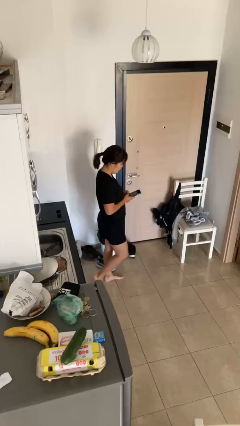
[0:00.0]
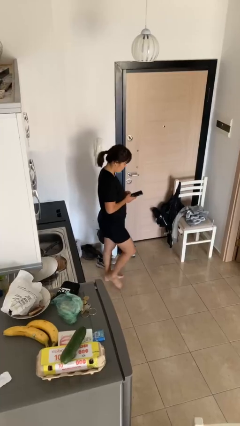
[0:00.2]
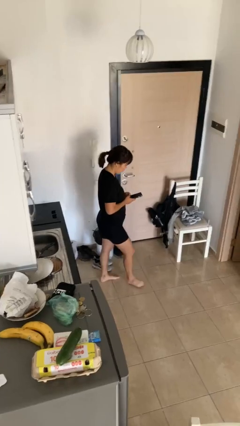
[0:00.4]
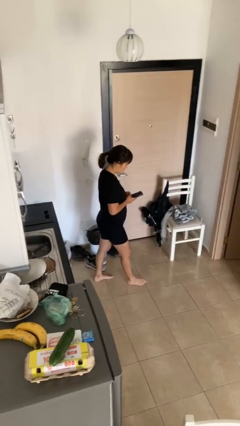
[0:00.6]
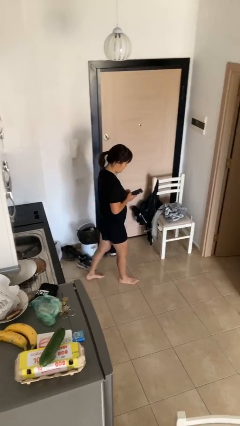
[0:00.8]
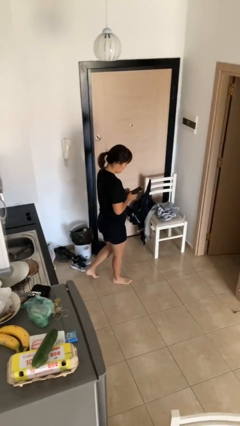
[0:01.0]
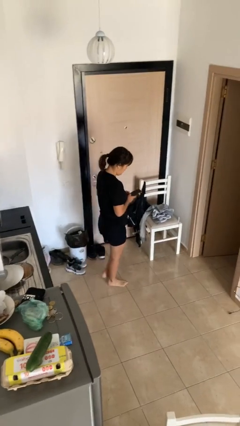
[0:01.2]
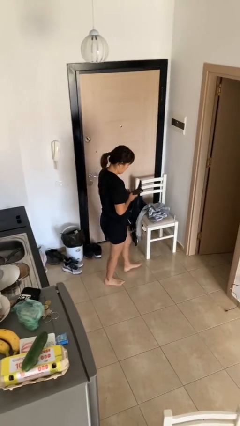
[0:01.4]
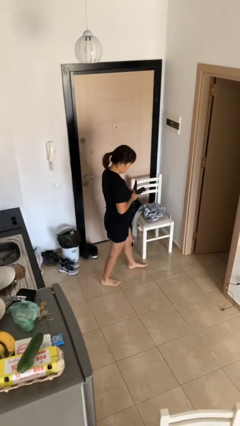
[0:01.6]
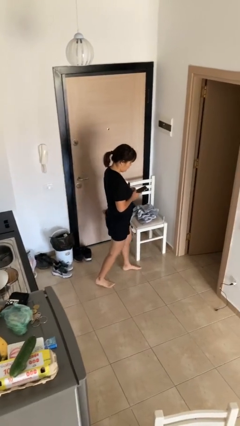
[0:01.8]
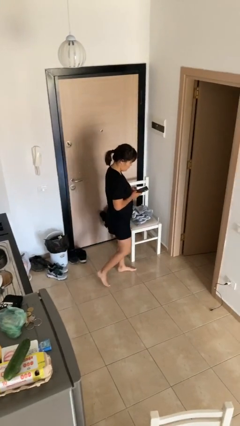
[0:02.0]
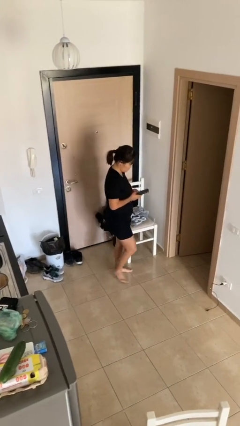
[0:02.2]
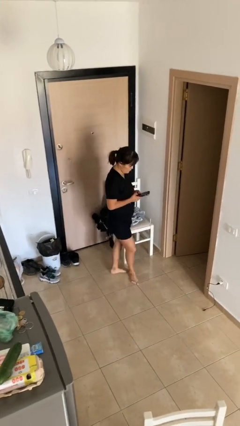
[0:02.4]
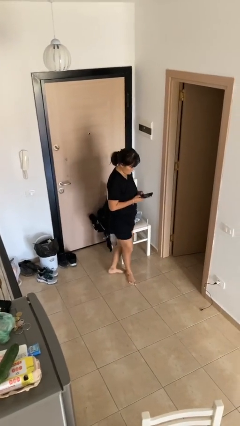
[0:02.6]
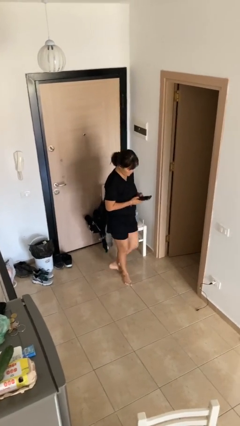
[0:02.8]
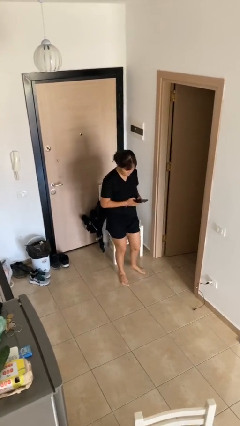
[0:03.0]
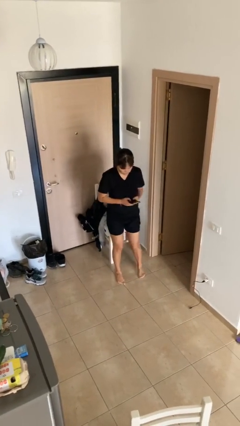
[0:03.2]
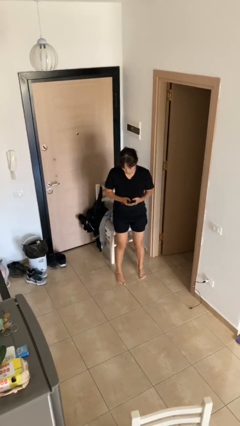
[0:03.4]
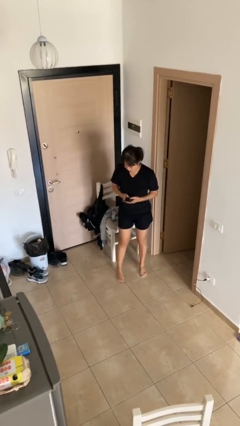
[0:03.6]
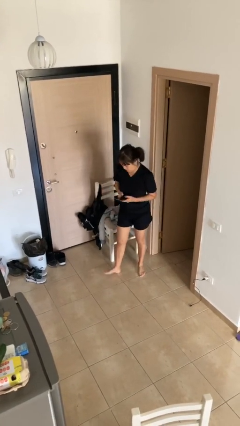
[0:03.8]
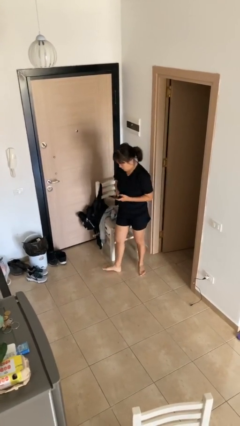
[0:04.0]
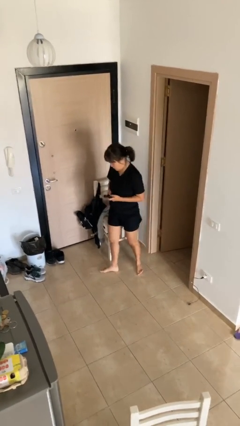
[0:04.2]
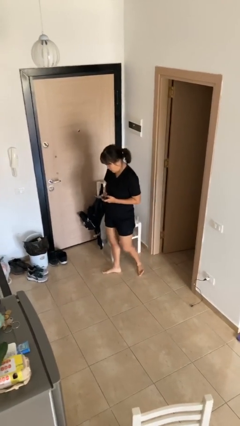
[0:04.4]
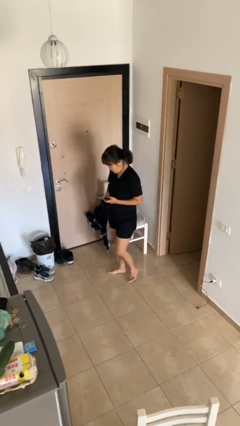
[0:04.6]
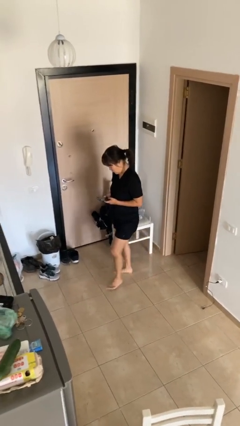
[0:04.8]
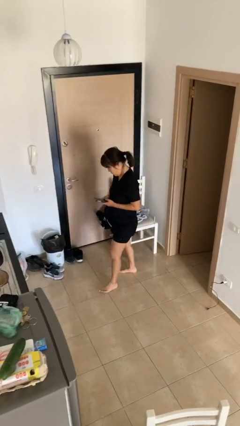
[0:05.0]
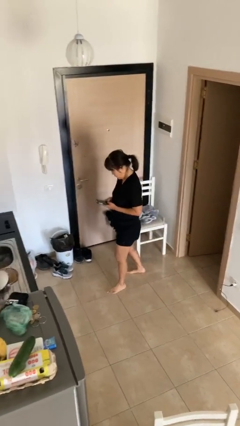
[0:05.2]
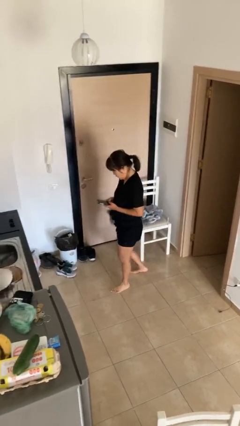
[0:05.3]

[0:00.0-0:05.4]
person texts on phone

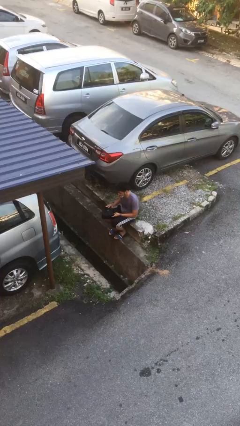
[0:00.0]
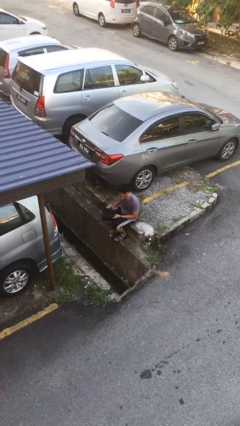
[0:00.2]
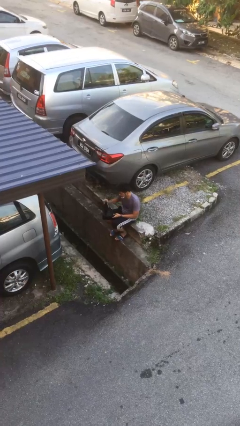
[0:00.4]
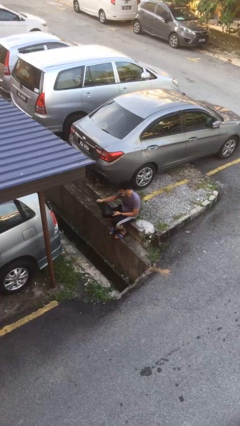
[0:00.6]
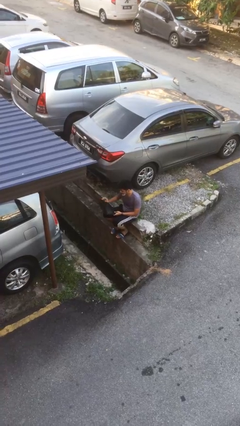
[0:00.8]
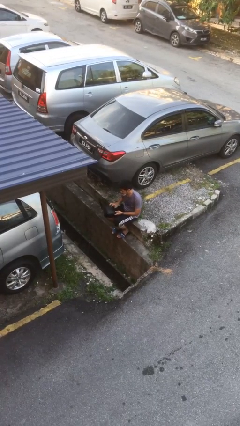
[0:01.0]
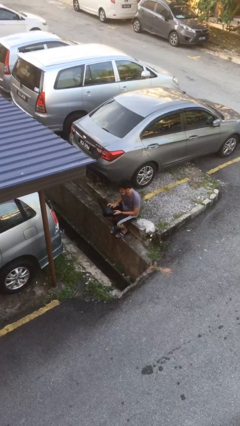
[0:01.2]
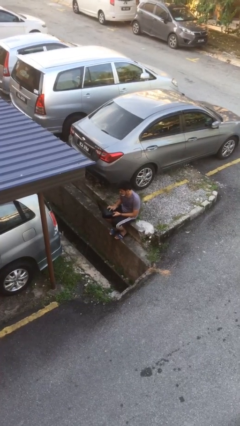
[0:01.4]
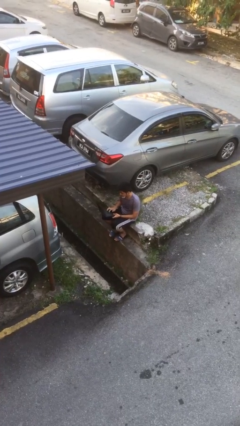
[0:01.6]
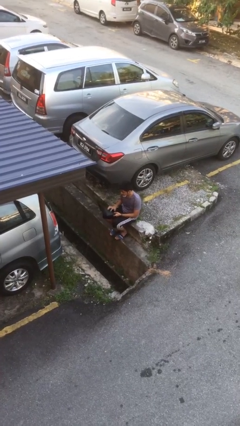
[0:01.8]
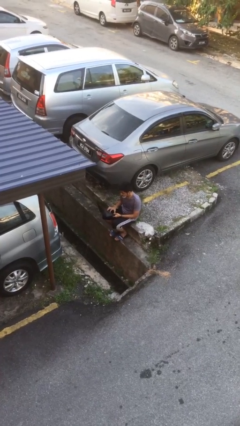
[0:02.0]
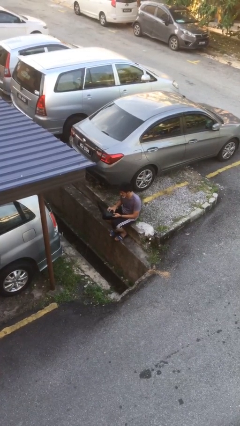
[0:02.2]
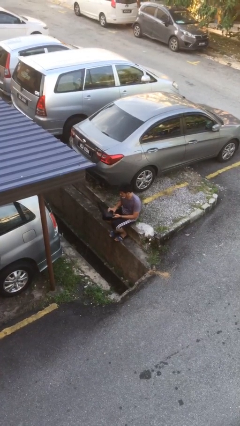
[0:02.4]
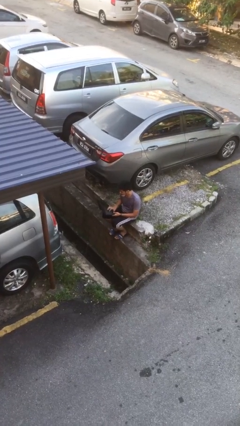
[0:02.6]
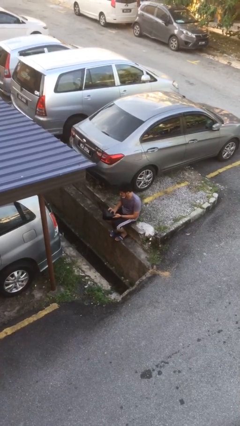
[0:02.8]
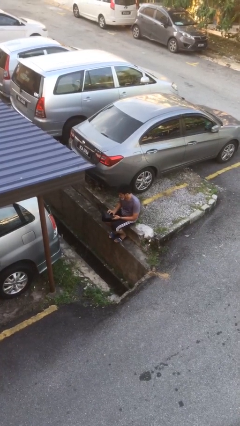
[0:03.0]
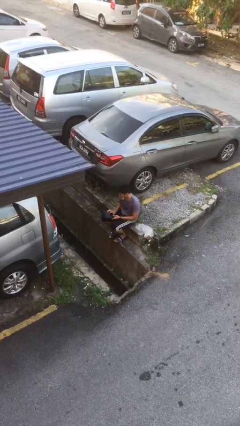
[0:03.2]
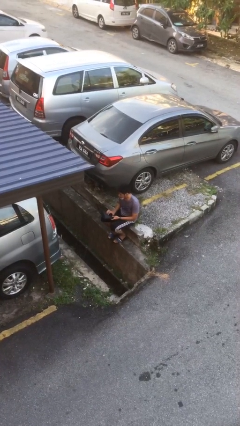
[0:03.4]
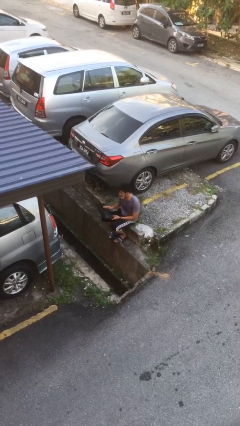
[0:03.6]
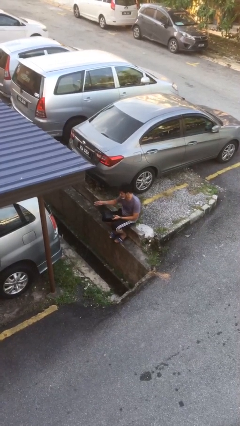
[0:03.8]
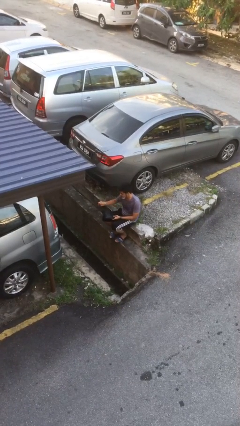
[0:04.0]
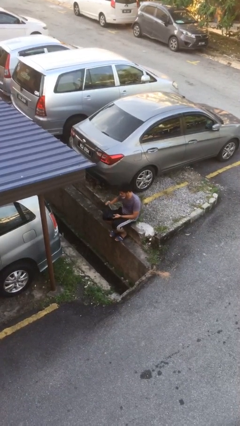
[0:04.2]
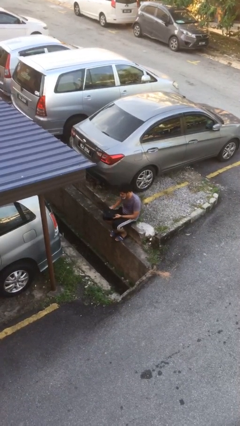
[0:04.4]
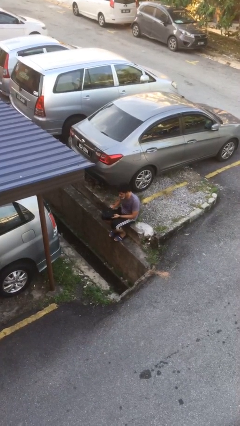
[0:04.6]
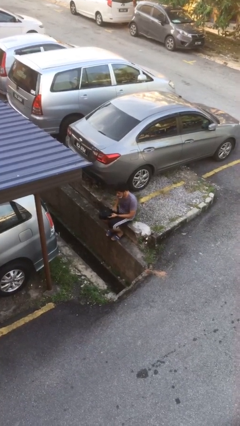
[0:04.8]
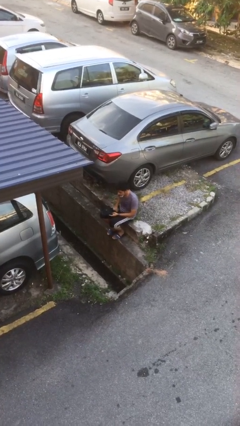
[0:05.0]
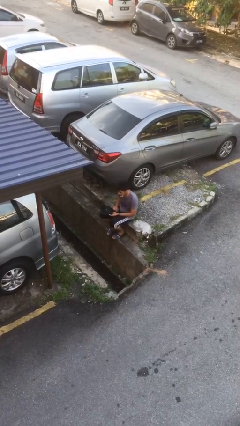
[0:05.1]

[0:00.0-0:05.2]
person interacts with laptop

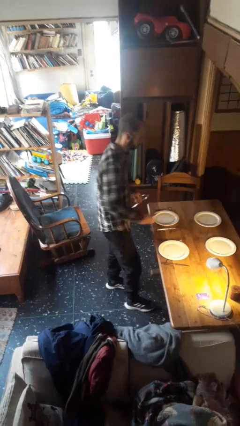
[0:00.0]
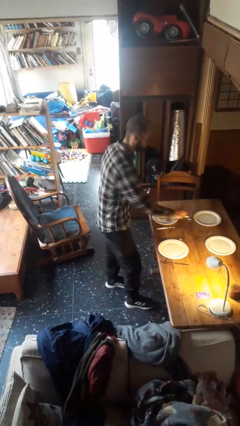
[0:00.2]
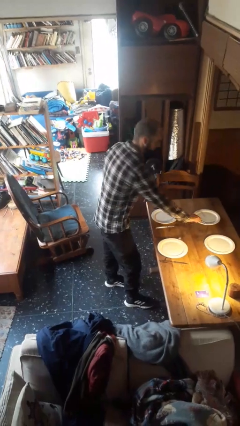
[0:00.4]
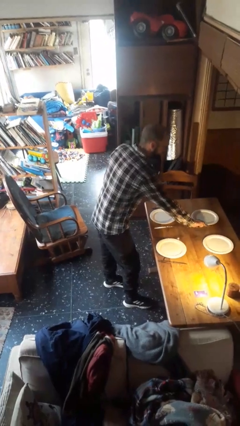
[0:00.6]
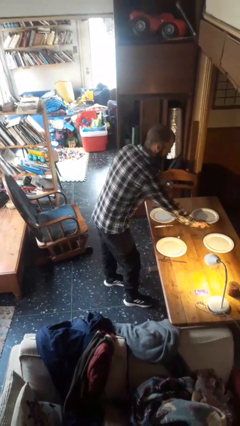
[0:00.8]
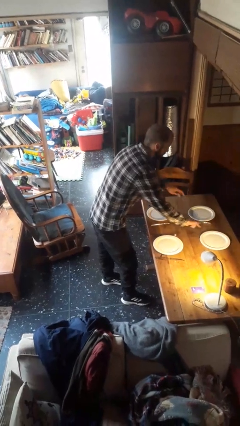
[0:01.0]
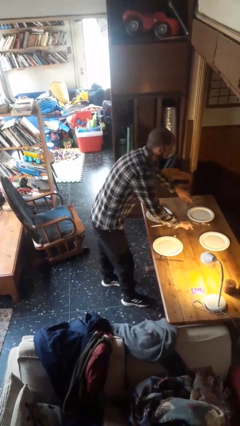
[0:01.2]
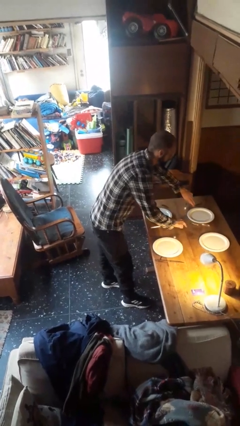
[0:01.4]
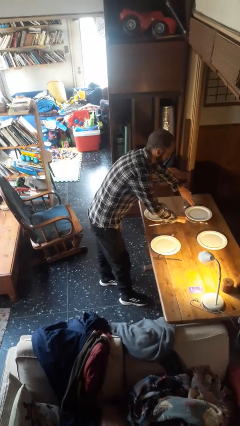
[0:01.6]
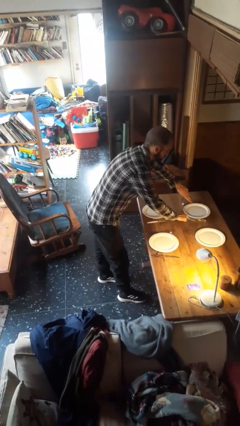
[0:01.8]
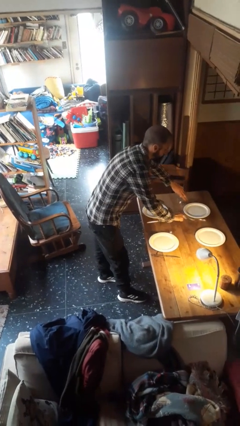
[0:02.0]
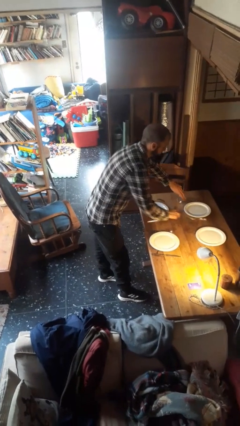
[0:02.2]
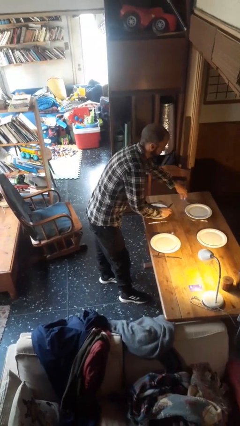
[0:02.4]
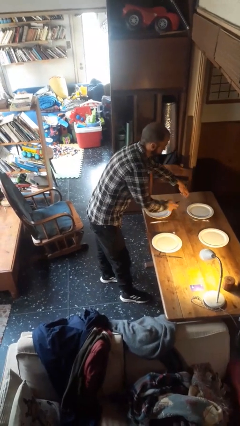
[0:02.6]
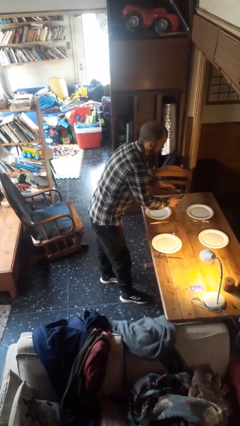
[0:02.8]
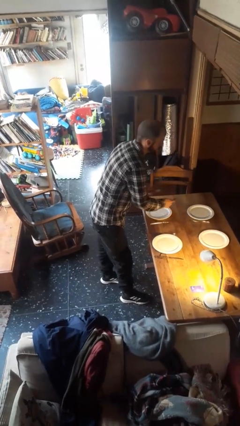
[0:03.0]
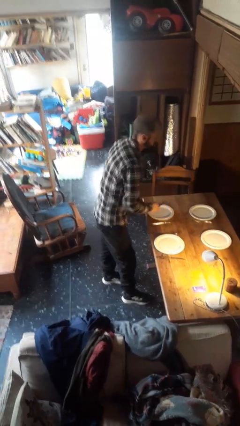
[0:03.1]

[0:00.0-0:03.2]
person sets table

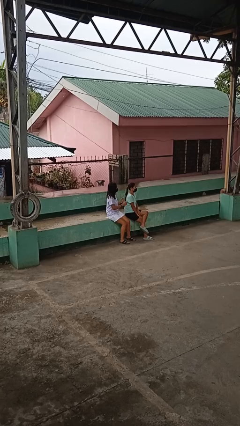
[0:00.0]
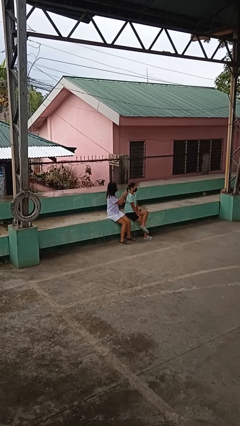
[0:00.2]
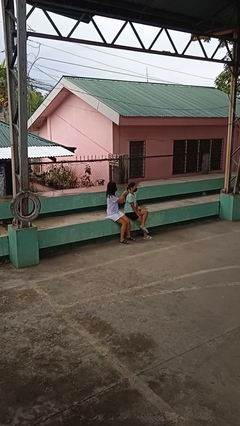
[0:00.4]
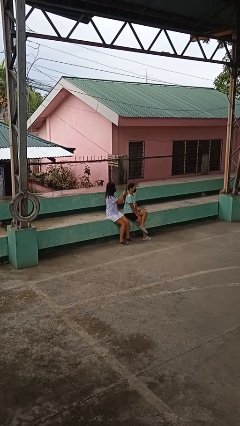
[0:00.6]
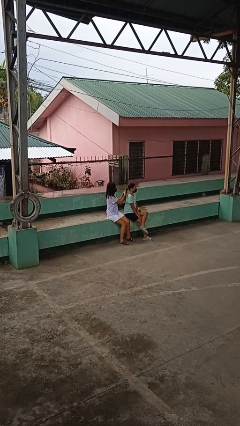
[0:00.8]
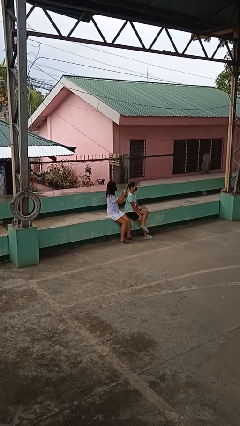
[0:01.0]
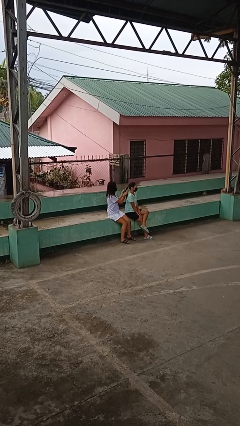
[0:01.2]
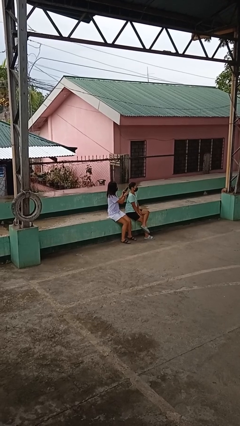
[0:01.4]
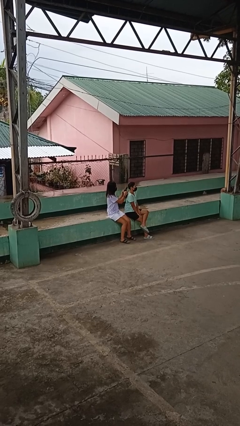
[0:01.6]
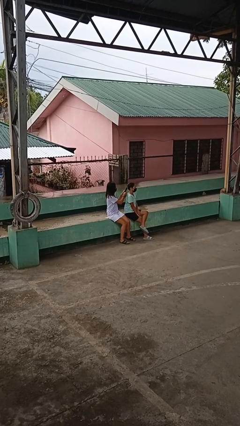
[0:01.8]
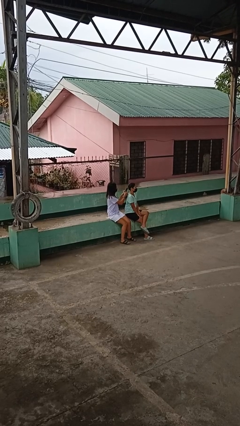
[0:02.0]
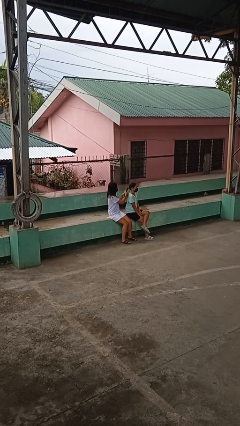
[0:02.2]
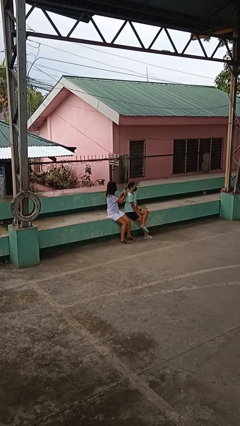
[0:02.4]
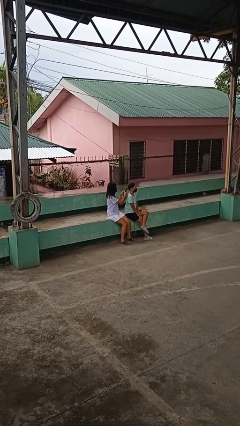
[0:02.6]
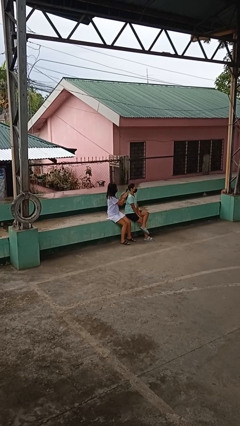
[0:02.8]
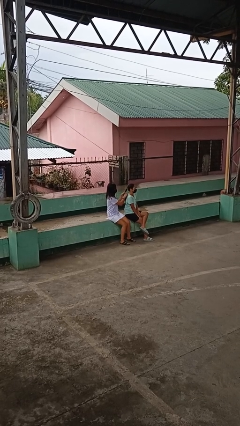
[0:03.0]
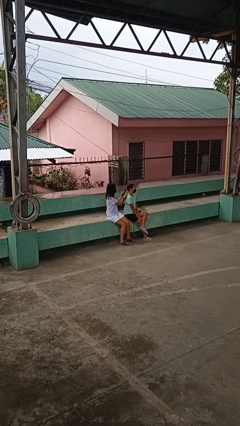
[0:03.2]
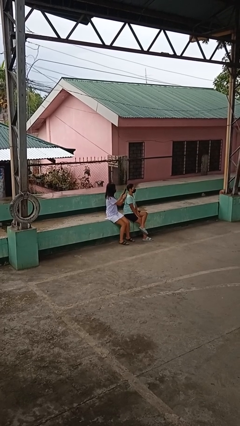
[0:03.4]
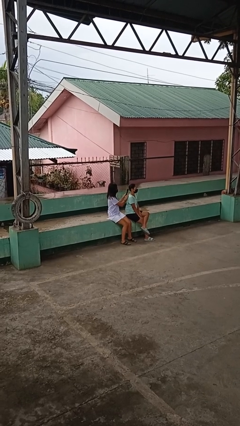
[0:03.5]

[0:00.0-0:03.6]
person braids hair of person

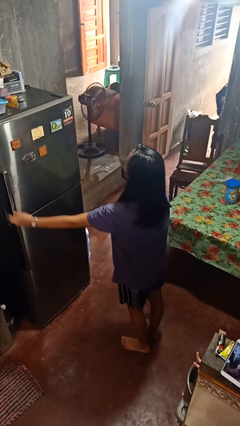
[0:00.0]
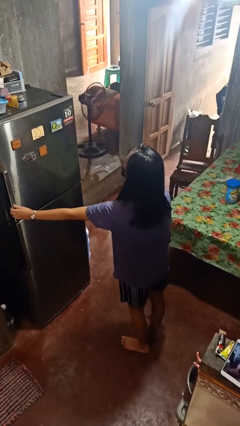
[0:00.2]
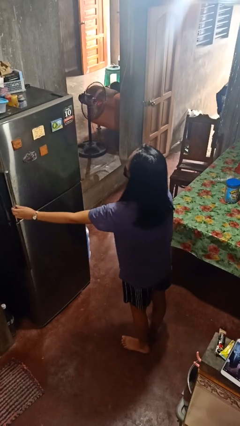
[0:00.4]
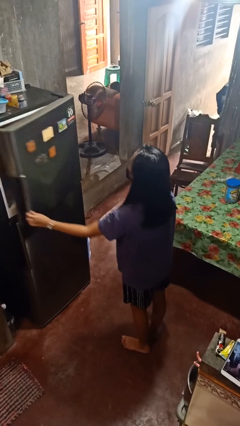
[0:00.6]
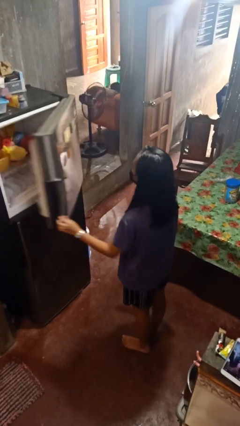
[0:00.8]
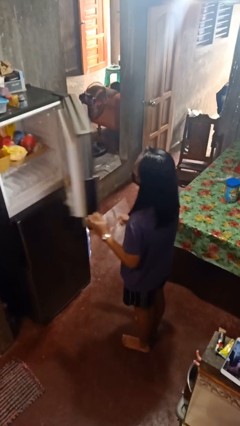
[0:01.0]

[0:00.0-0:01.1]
person opens refrigerator
